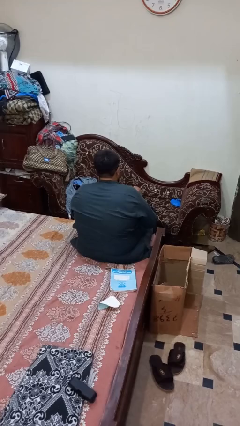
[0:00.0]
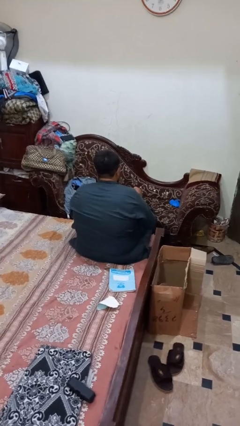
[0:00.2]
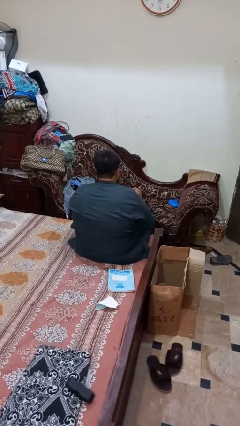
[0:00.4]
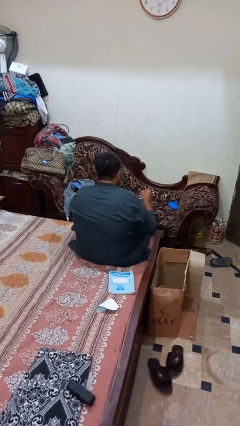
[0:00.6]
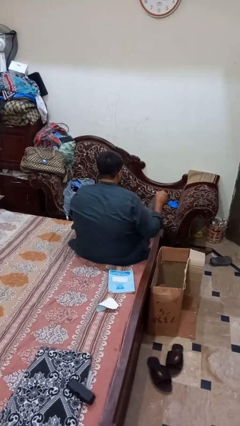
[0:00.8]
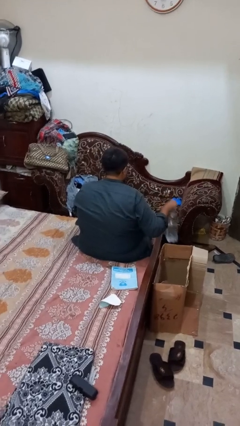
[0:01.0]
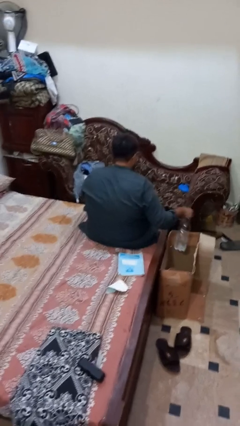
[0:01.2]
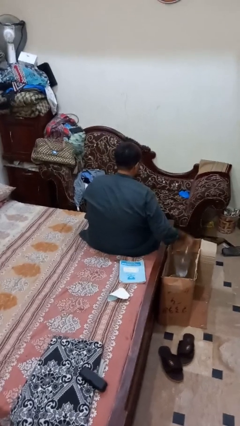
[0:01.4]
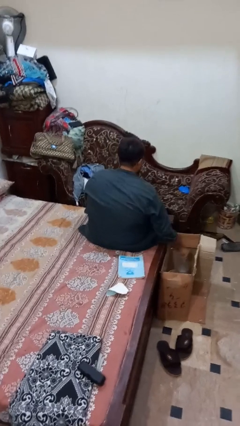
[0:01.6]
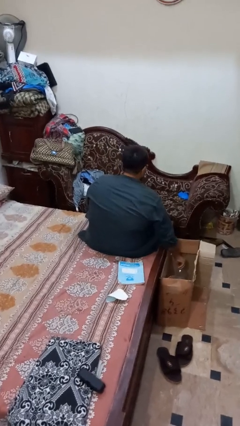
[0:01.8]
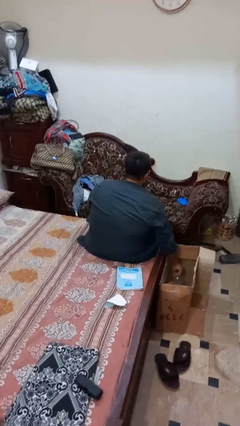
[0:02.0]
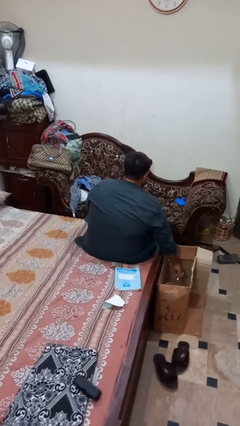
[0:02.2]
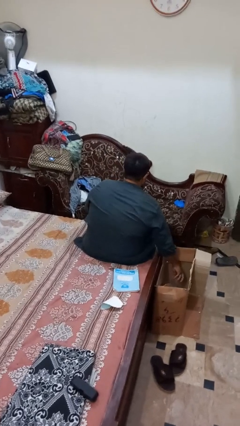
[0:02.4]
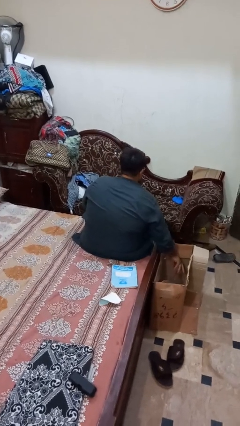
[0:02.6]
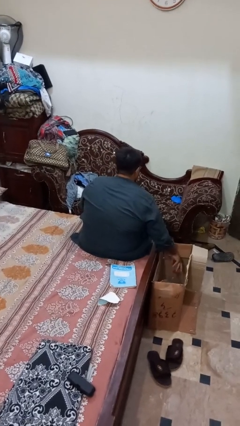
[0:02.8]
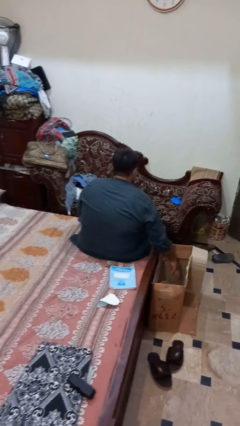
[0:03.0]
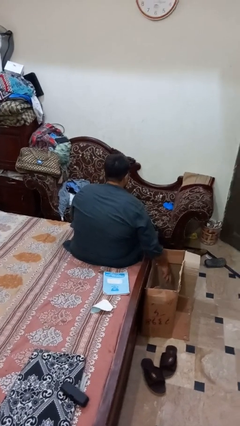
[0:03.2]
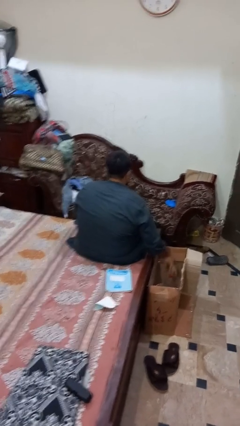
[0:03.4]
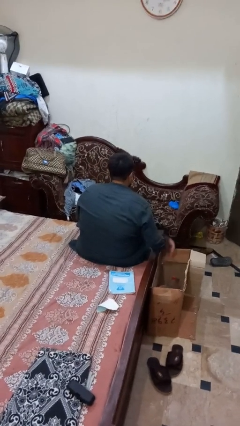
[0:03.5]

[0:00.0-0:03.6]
person puts object into box

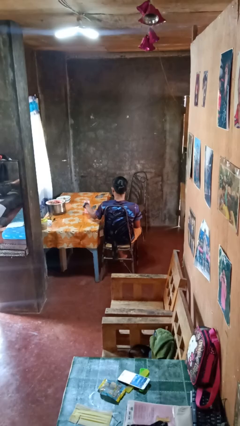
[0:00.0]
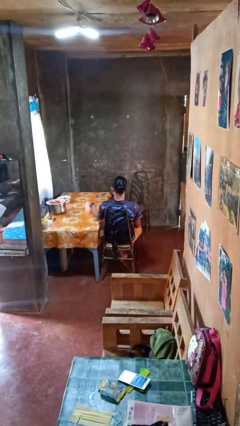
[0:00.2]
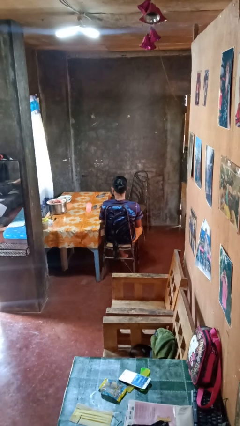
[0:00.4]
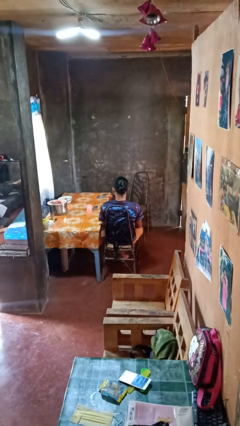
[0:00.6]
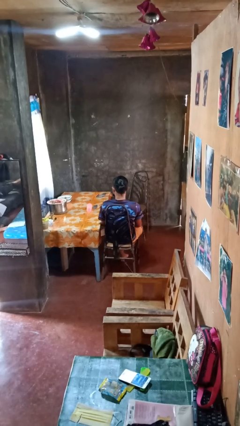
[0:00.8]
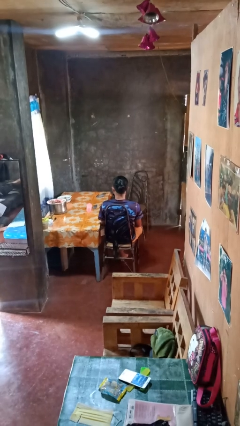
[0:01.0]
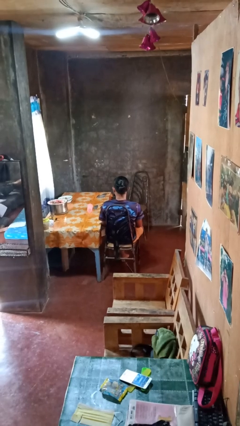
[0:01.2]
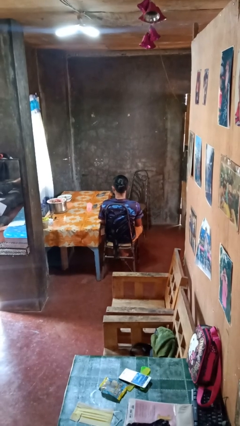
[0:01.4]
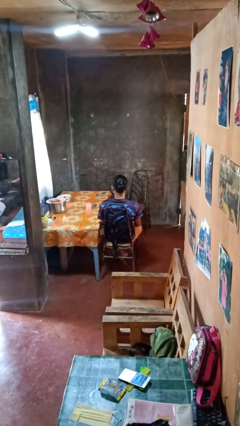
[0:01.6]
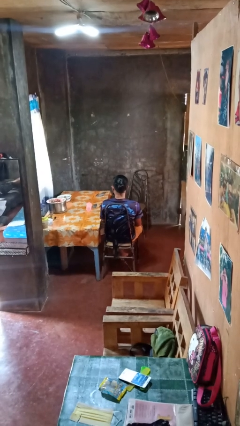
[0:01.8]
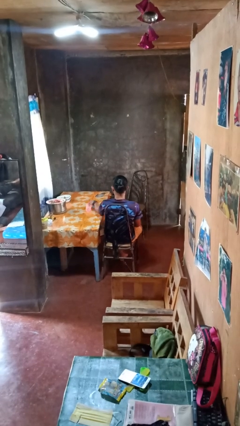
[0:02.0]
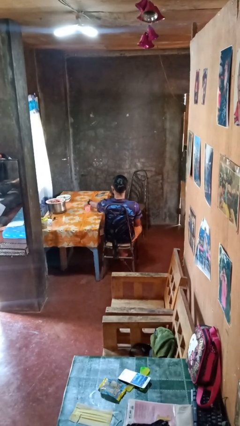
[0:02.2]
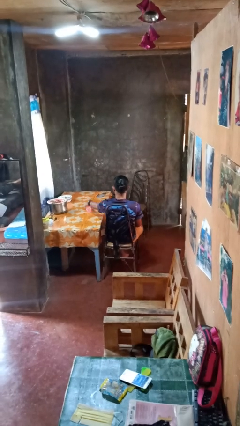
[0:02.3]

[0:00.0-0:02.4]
person knocks over glass

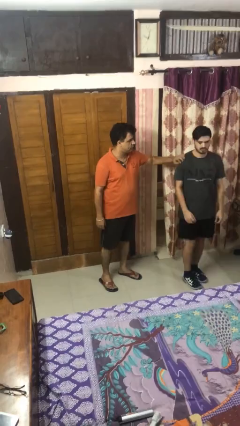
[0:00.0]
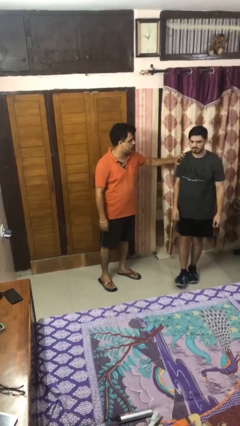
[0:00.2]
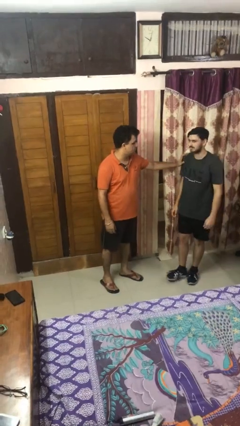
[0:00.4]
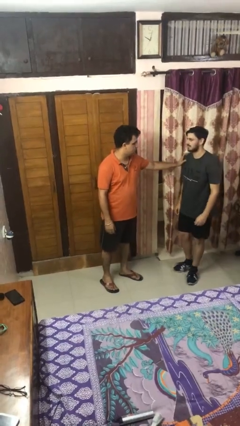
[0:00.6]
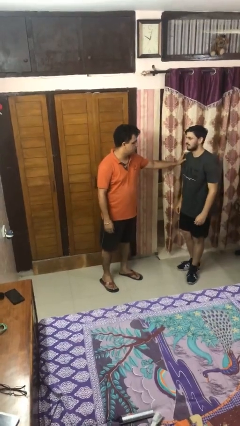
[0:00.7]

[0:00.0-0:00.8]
person spins person around

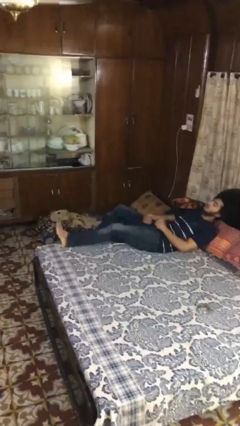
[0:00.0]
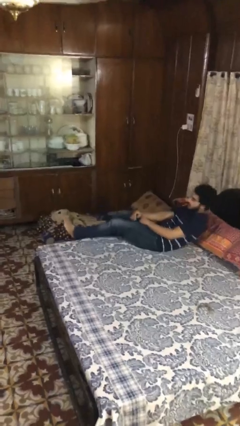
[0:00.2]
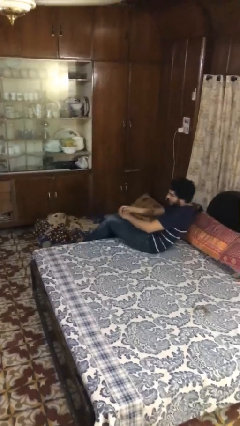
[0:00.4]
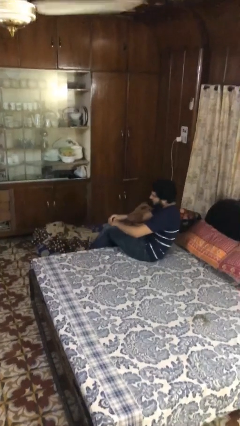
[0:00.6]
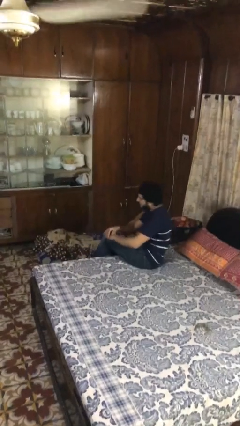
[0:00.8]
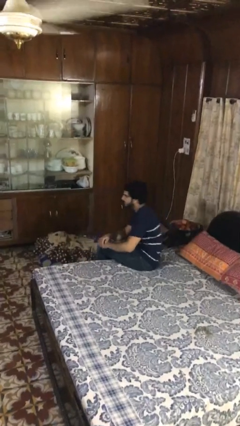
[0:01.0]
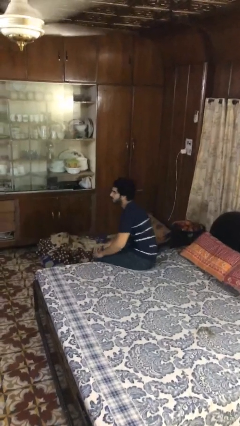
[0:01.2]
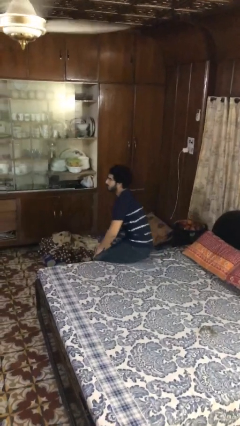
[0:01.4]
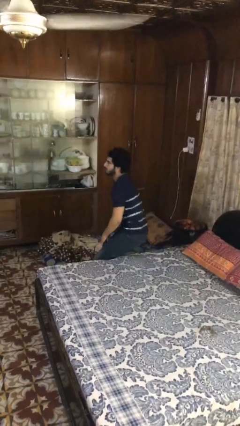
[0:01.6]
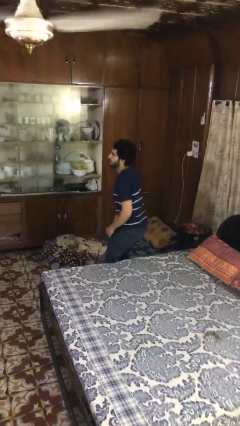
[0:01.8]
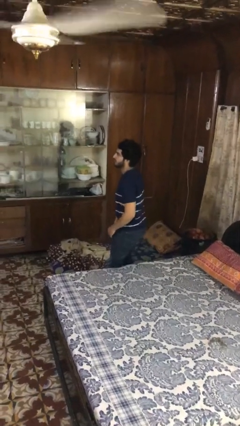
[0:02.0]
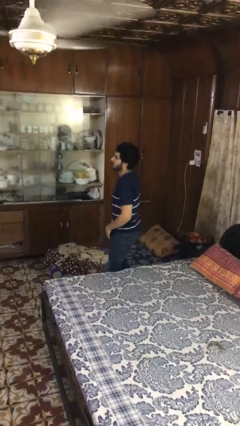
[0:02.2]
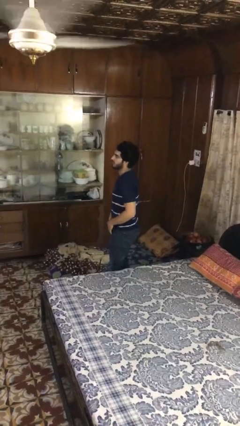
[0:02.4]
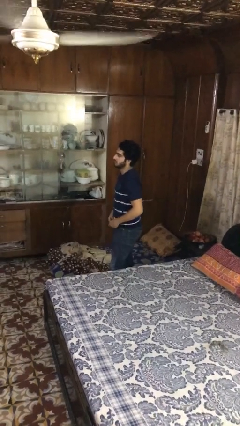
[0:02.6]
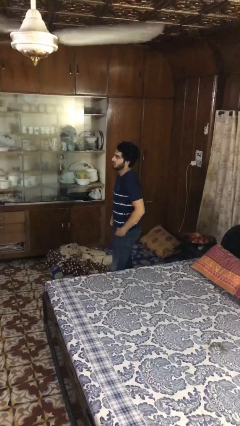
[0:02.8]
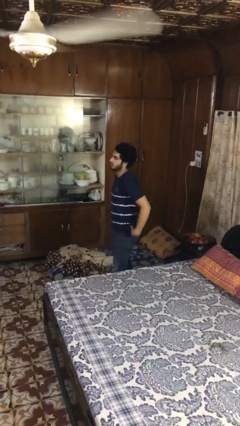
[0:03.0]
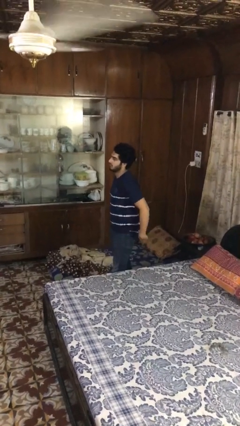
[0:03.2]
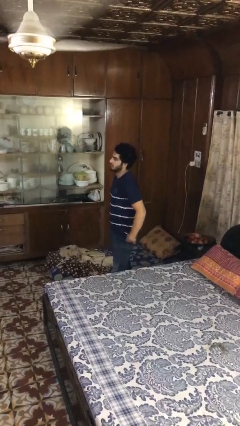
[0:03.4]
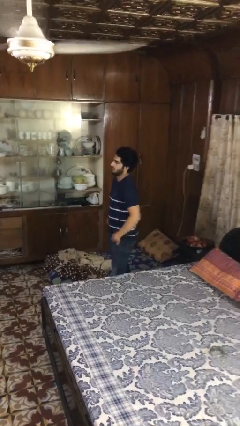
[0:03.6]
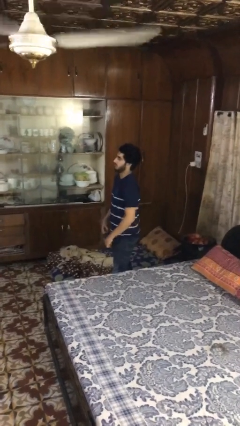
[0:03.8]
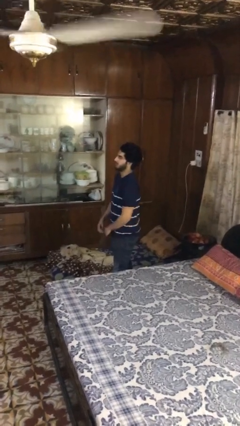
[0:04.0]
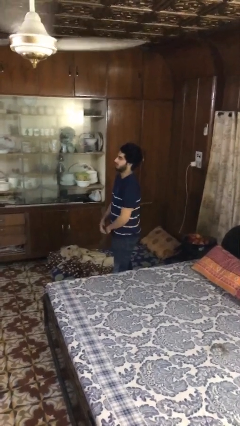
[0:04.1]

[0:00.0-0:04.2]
person stands up

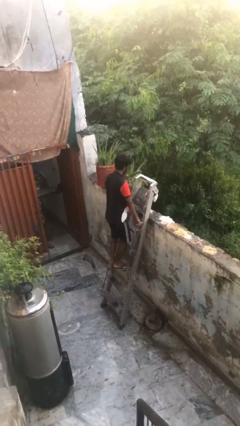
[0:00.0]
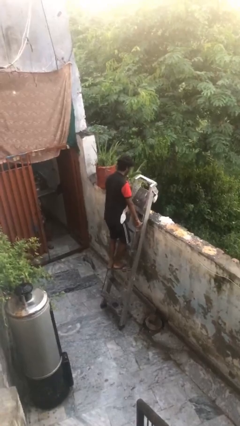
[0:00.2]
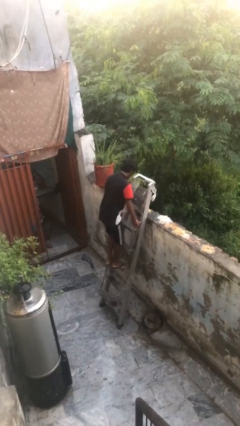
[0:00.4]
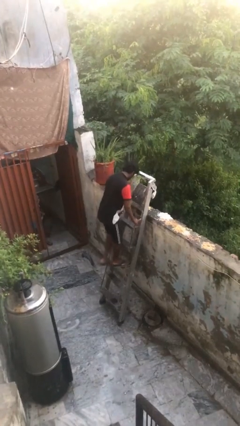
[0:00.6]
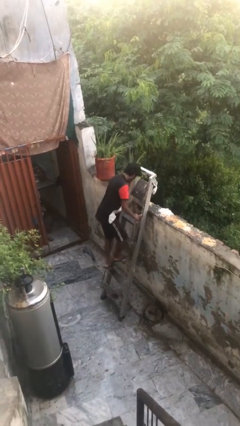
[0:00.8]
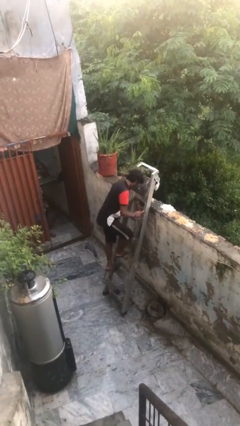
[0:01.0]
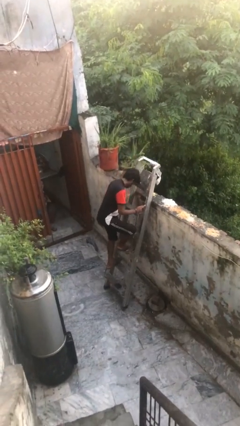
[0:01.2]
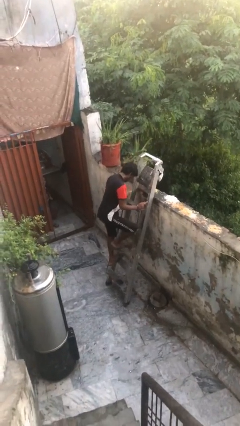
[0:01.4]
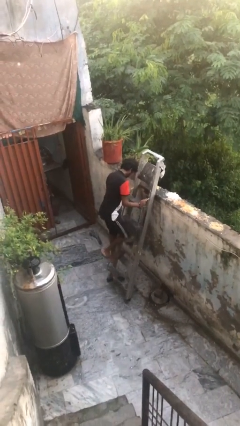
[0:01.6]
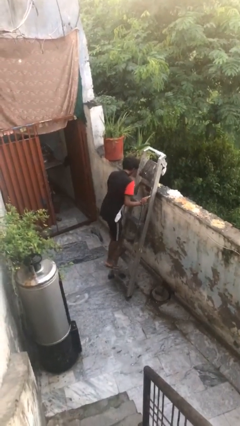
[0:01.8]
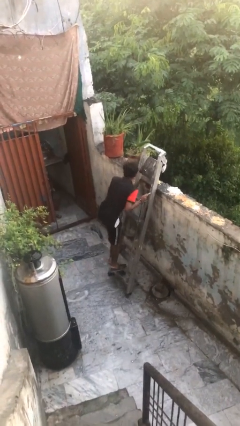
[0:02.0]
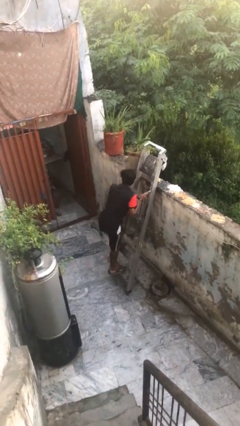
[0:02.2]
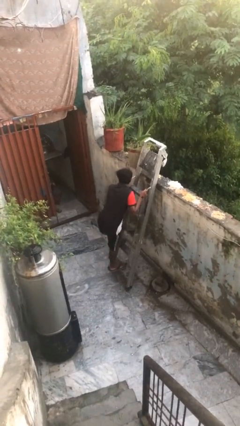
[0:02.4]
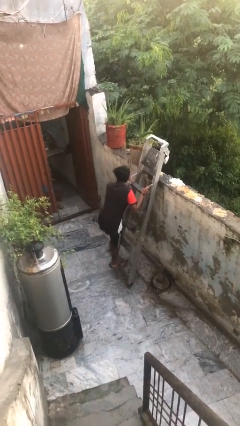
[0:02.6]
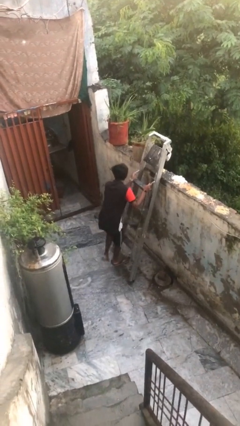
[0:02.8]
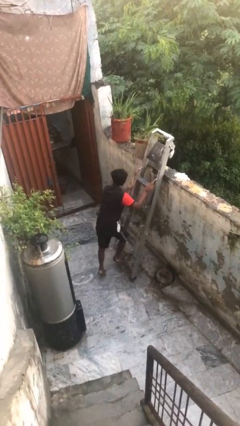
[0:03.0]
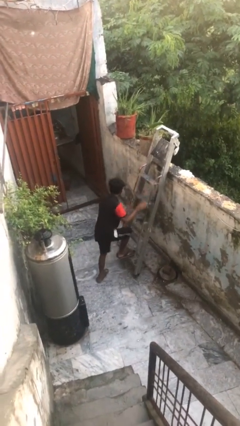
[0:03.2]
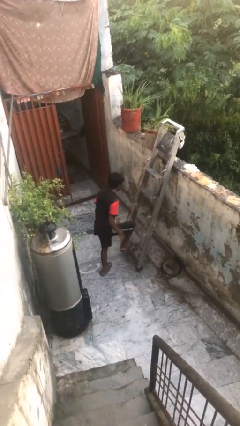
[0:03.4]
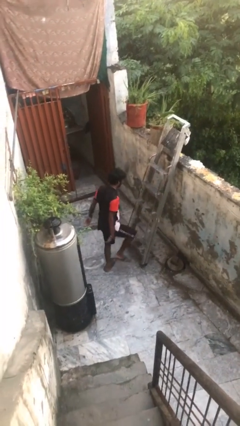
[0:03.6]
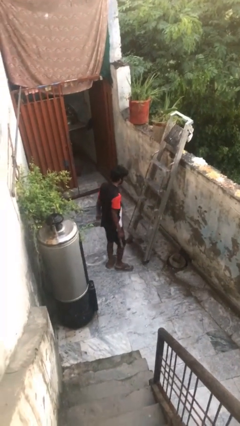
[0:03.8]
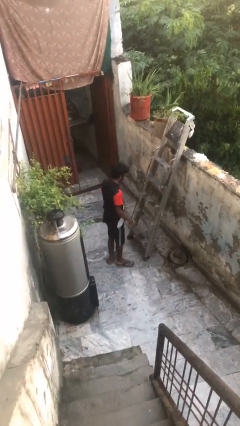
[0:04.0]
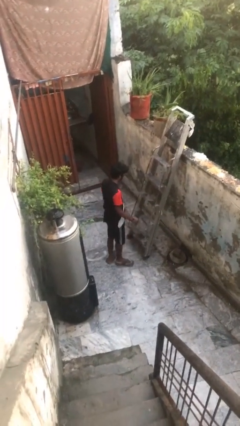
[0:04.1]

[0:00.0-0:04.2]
person climbs down ladder

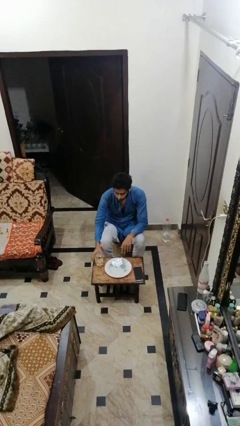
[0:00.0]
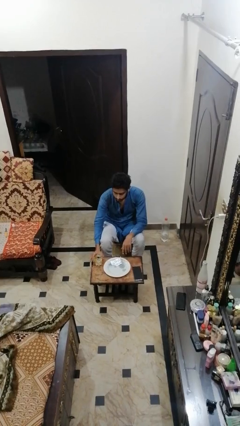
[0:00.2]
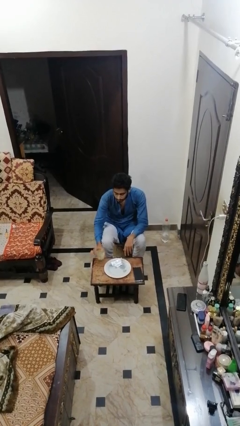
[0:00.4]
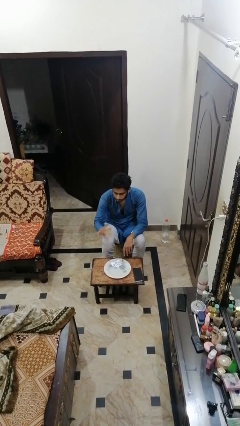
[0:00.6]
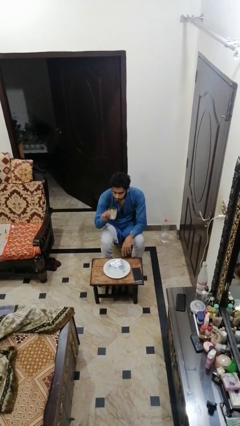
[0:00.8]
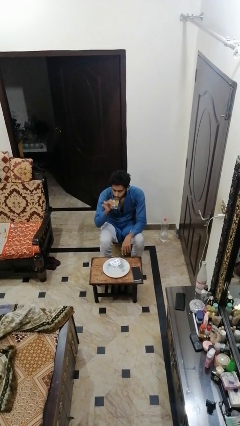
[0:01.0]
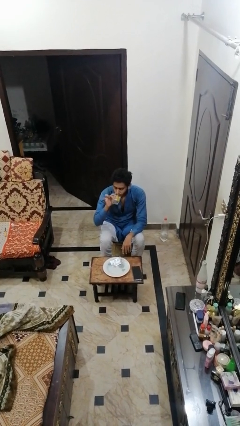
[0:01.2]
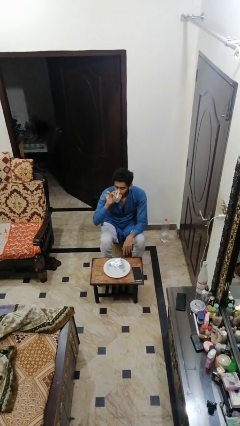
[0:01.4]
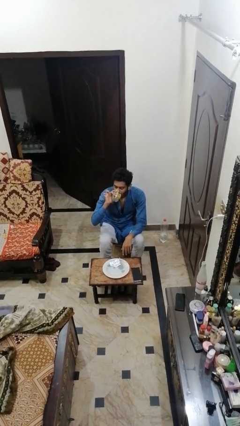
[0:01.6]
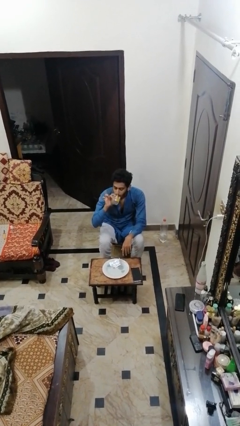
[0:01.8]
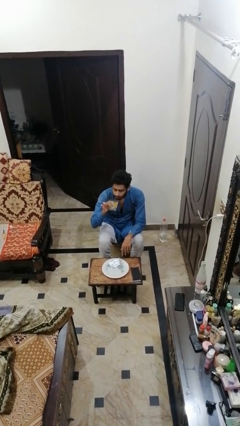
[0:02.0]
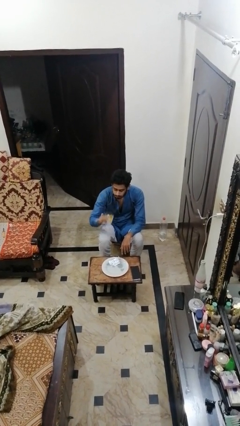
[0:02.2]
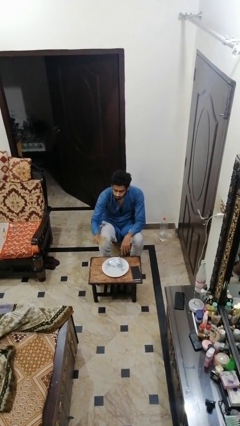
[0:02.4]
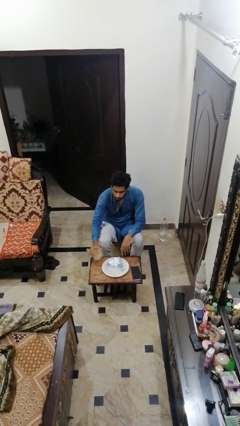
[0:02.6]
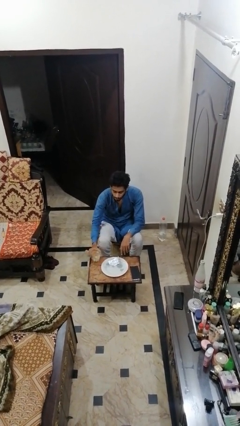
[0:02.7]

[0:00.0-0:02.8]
person drinks from cup
